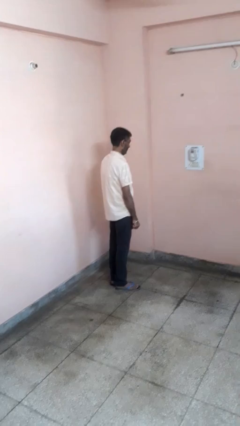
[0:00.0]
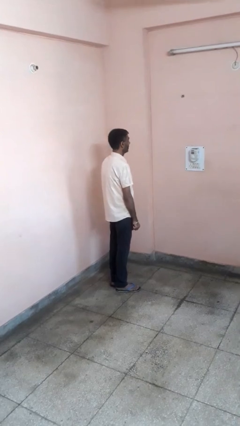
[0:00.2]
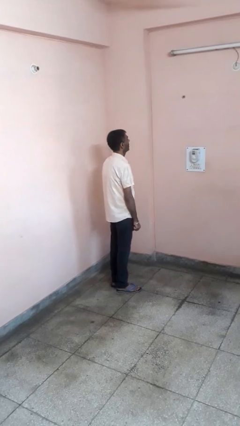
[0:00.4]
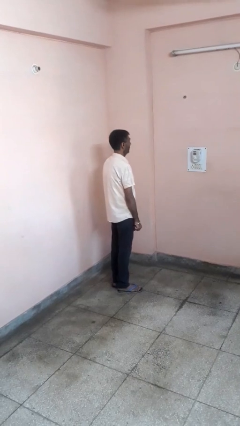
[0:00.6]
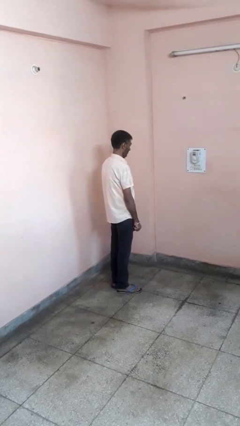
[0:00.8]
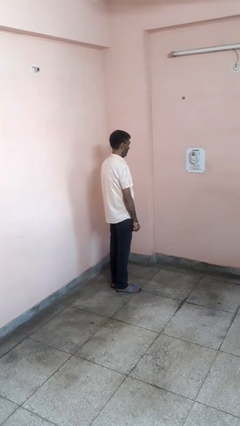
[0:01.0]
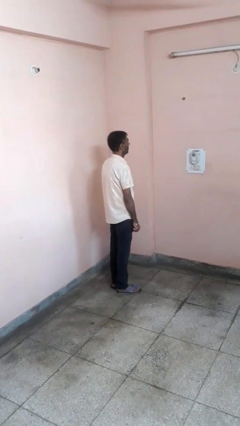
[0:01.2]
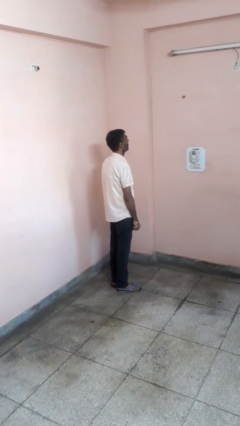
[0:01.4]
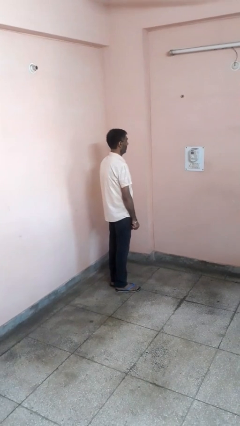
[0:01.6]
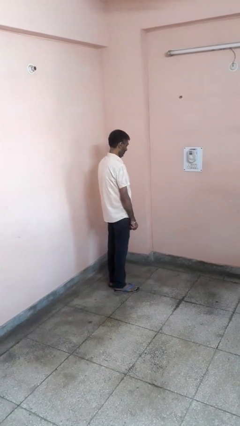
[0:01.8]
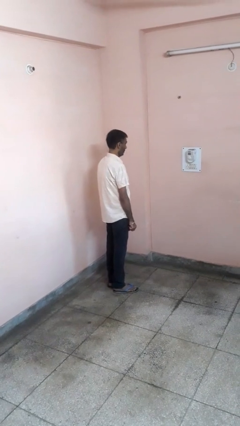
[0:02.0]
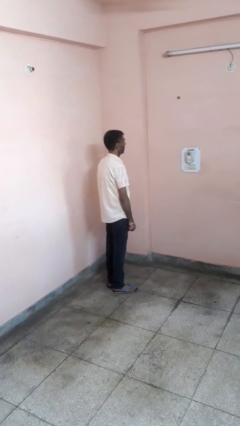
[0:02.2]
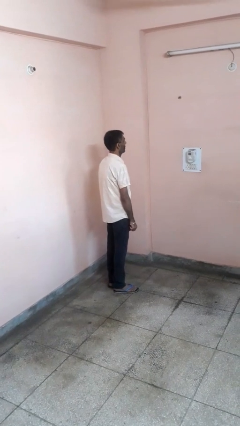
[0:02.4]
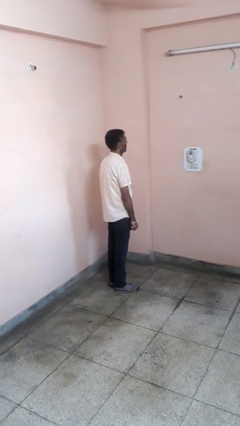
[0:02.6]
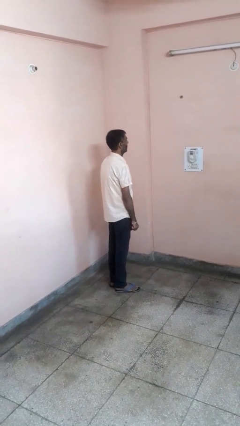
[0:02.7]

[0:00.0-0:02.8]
person nods head

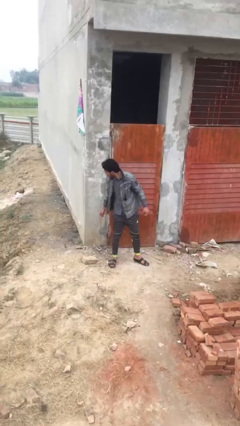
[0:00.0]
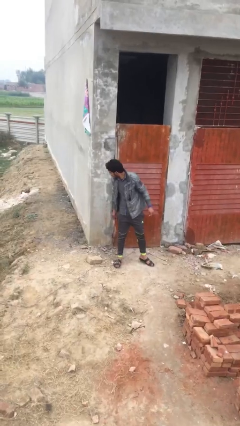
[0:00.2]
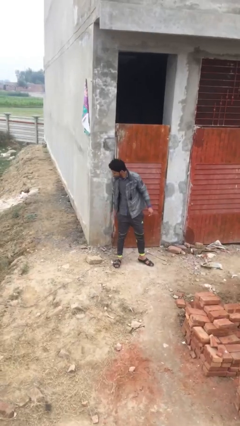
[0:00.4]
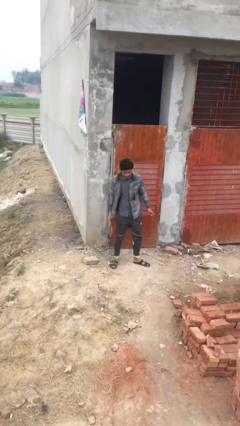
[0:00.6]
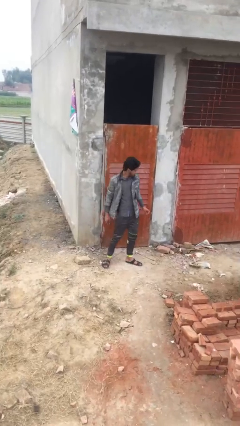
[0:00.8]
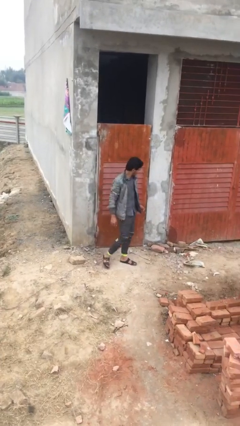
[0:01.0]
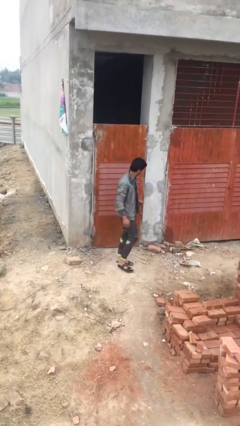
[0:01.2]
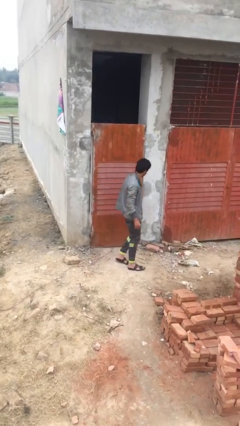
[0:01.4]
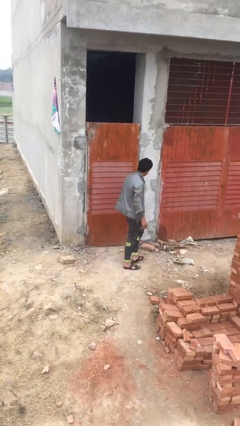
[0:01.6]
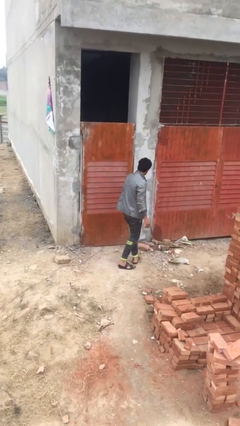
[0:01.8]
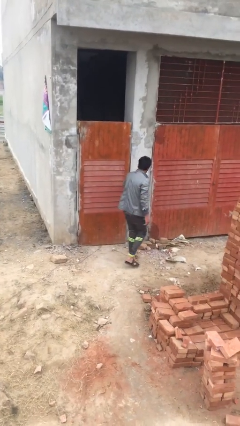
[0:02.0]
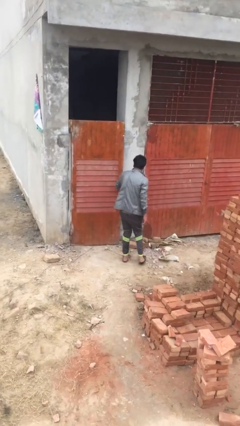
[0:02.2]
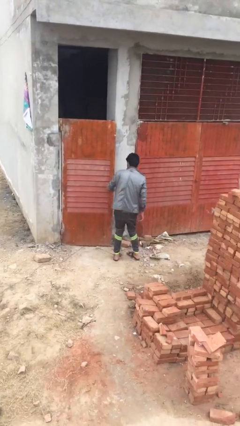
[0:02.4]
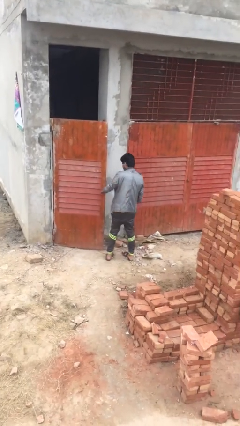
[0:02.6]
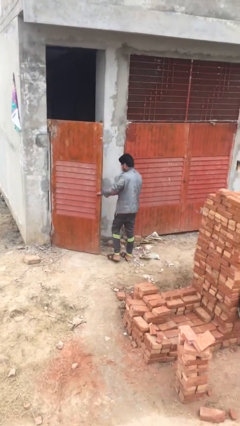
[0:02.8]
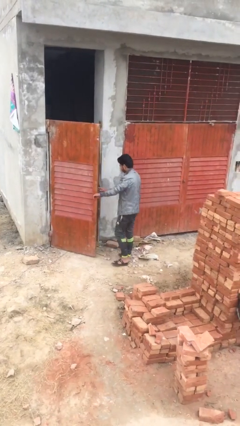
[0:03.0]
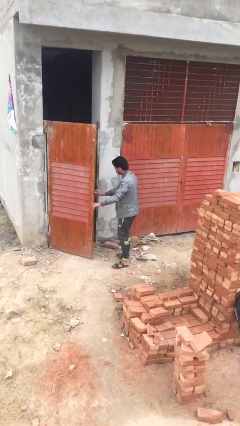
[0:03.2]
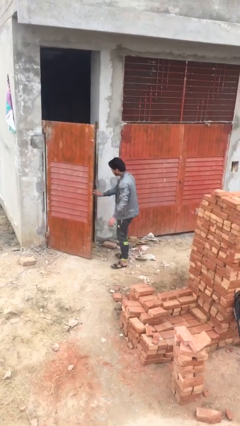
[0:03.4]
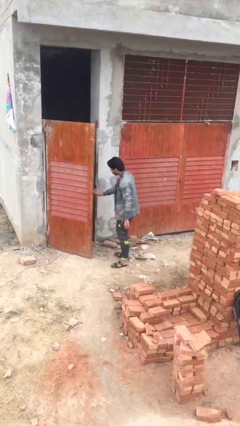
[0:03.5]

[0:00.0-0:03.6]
person opens facility door

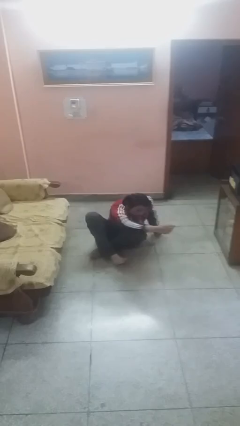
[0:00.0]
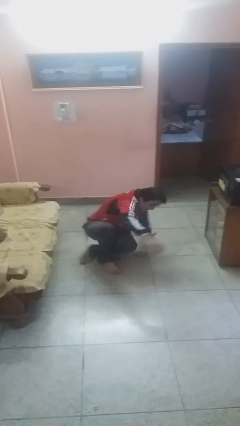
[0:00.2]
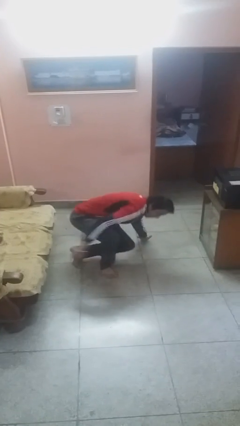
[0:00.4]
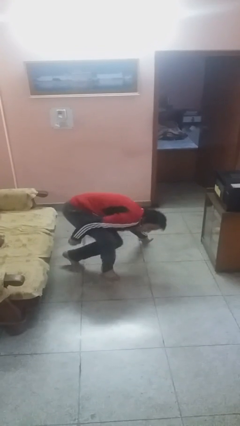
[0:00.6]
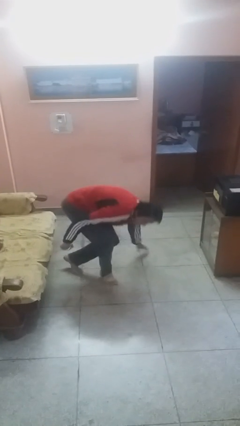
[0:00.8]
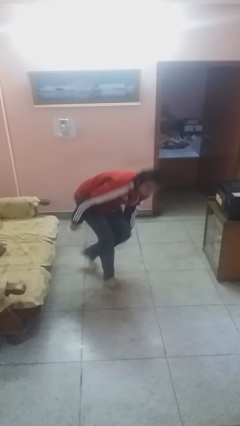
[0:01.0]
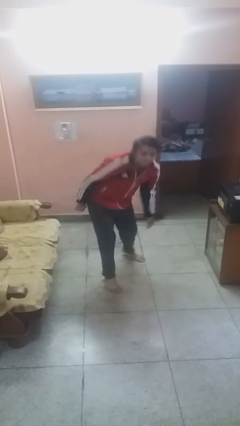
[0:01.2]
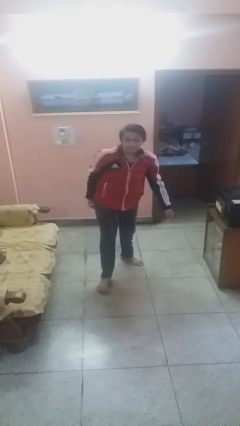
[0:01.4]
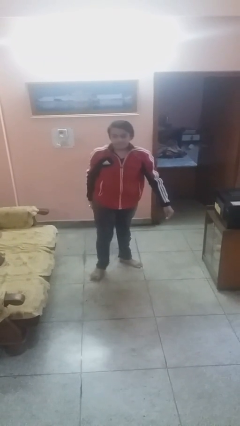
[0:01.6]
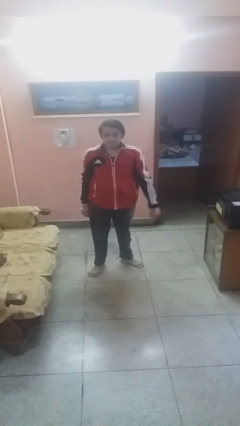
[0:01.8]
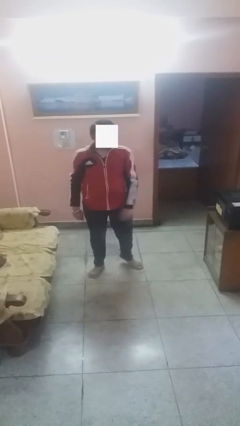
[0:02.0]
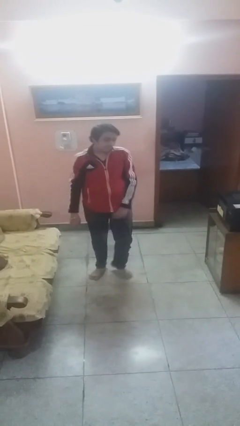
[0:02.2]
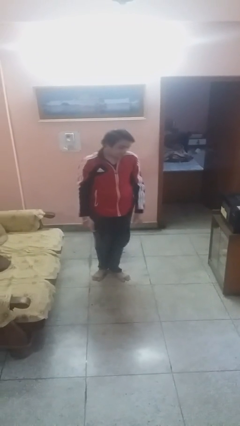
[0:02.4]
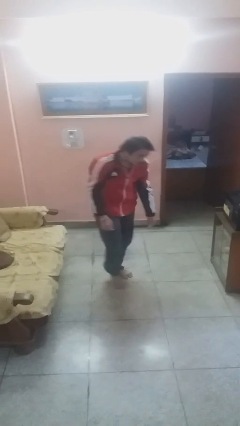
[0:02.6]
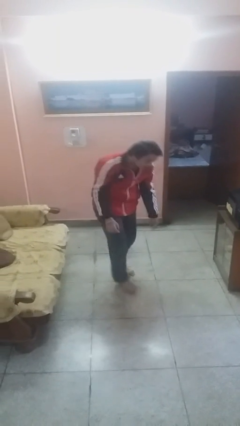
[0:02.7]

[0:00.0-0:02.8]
person stands up

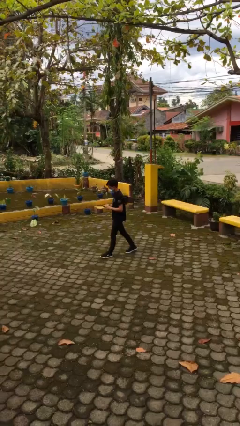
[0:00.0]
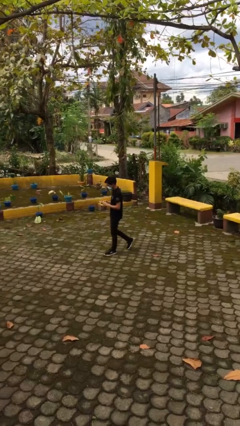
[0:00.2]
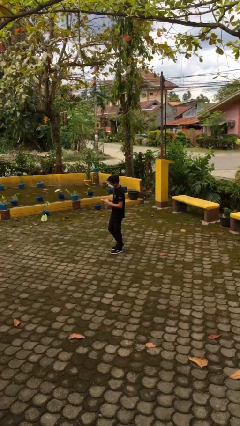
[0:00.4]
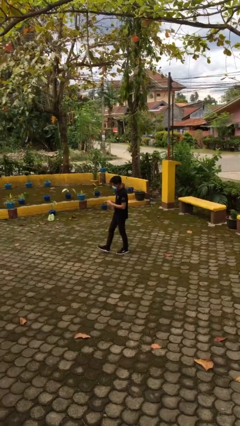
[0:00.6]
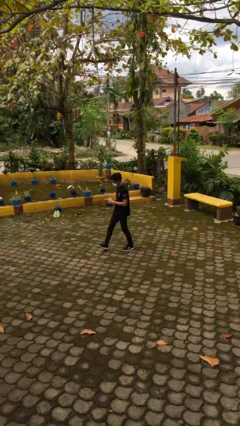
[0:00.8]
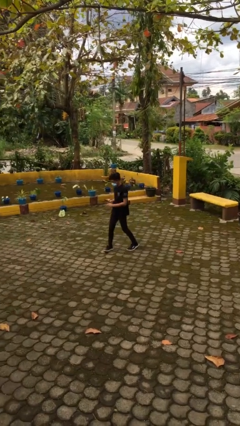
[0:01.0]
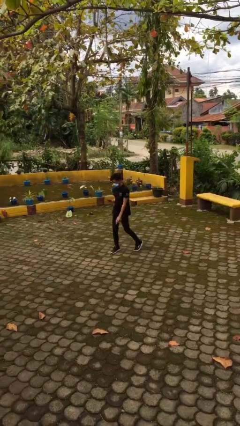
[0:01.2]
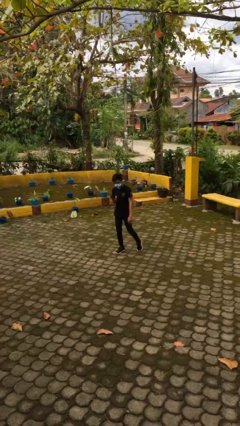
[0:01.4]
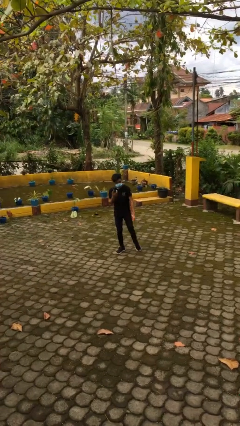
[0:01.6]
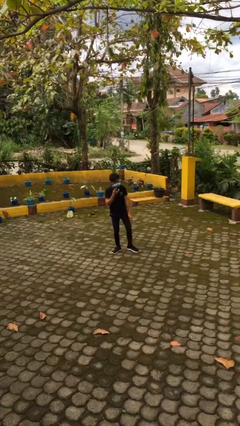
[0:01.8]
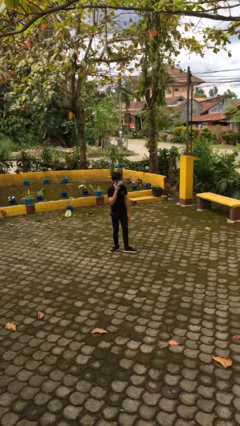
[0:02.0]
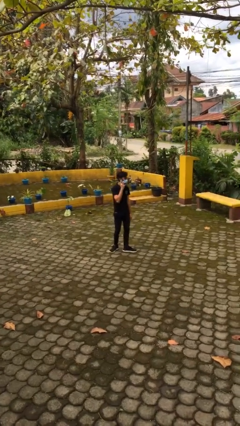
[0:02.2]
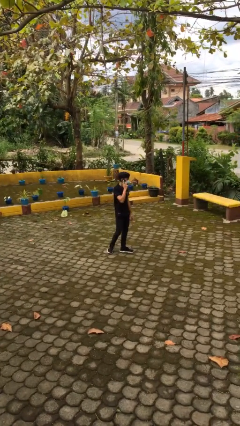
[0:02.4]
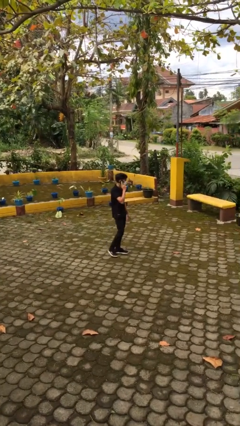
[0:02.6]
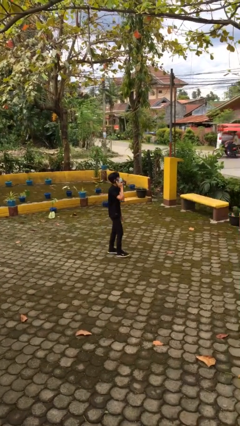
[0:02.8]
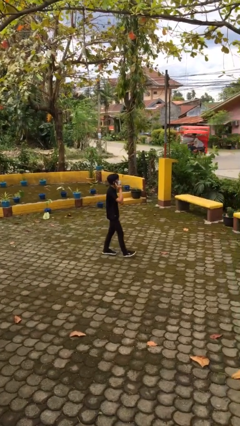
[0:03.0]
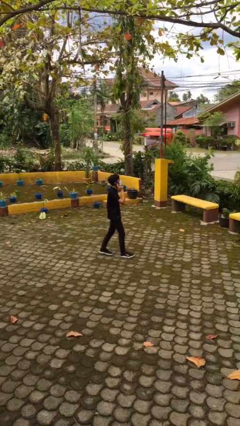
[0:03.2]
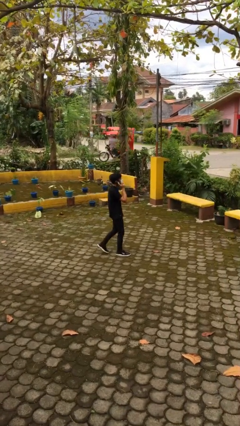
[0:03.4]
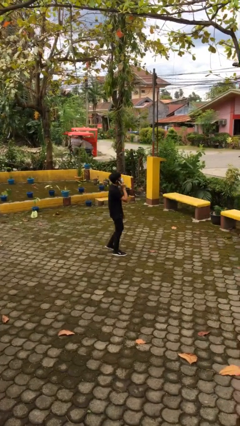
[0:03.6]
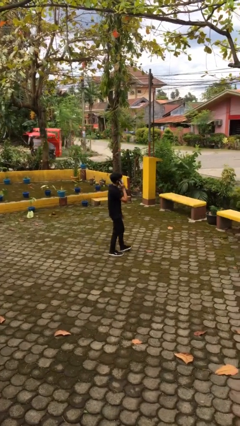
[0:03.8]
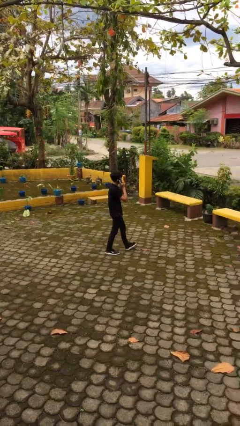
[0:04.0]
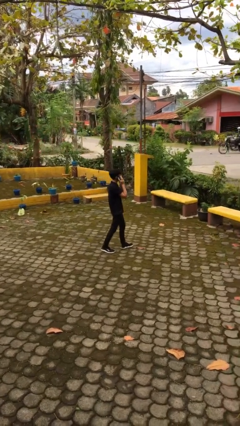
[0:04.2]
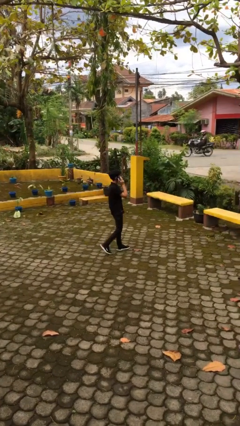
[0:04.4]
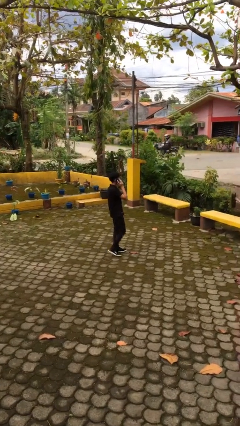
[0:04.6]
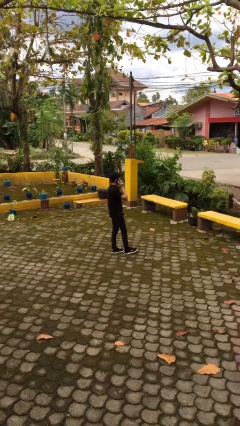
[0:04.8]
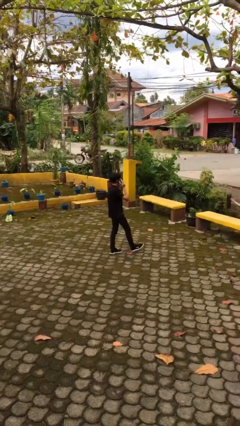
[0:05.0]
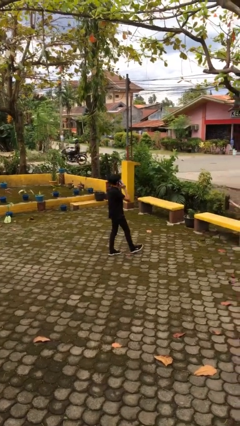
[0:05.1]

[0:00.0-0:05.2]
person talks on phone

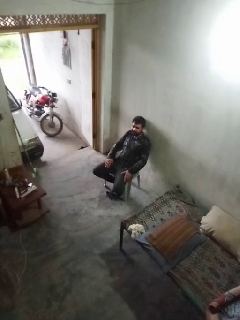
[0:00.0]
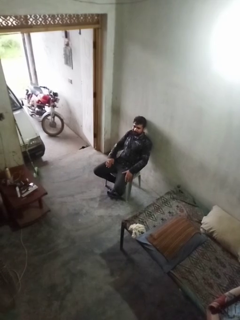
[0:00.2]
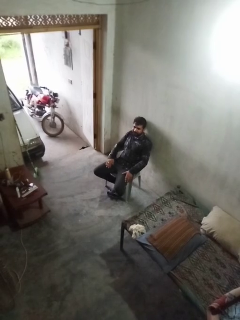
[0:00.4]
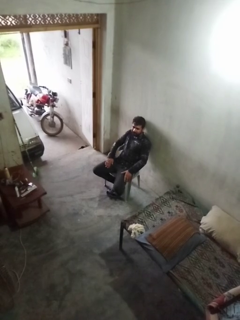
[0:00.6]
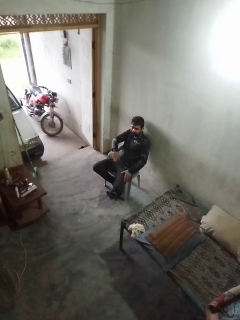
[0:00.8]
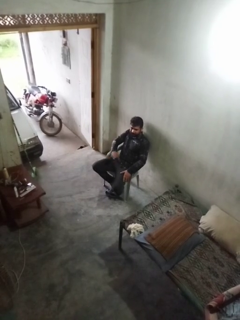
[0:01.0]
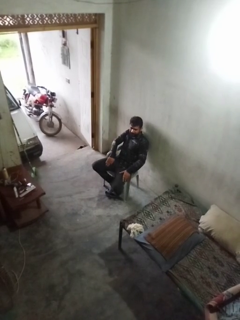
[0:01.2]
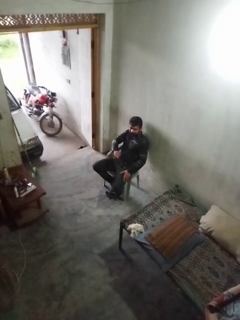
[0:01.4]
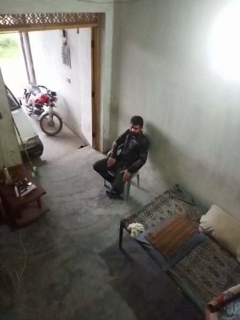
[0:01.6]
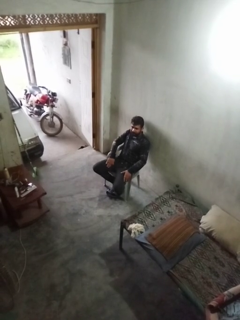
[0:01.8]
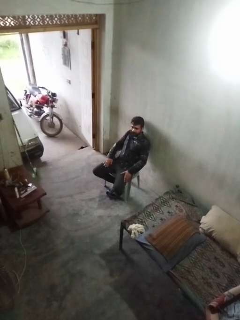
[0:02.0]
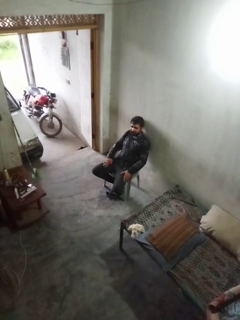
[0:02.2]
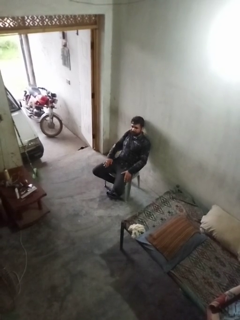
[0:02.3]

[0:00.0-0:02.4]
person slaps hands on thighs

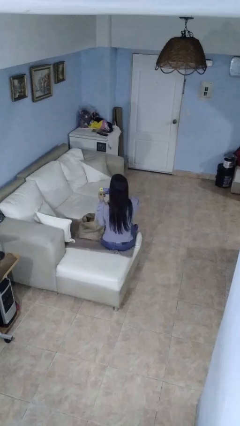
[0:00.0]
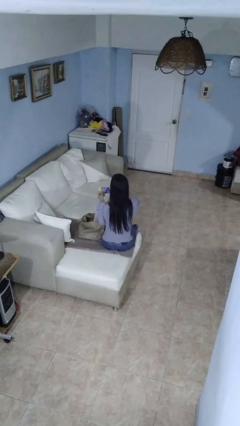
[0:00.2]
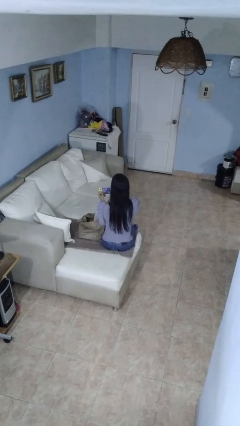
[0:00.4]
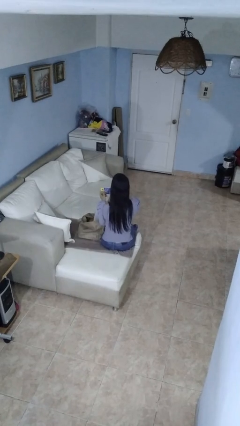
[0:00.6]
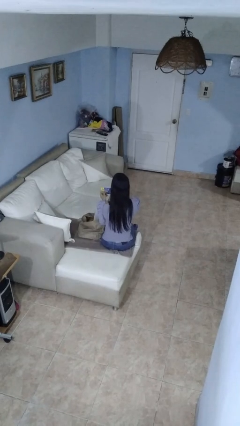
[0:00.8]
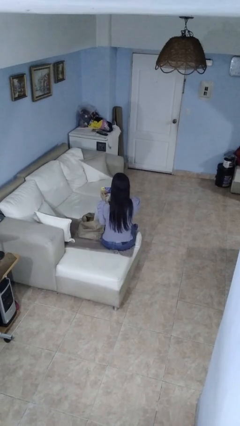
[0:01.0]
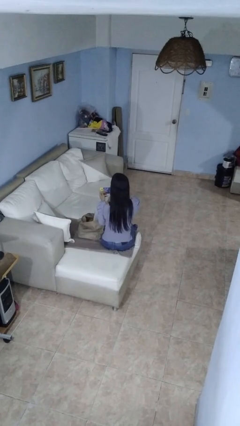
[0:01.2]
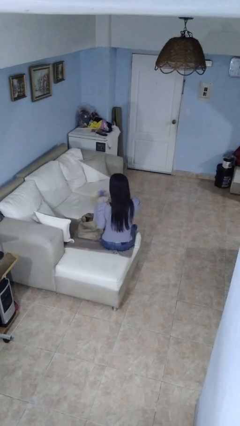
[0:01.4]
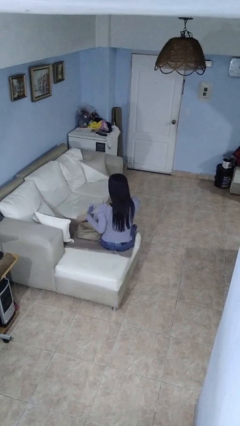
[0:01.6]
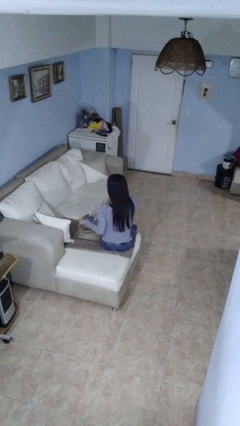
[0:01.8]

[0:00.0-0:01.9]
person puts object into bag
